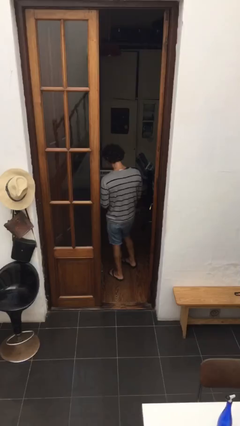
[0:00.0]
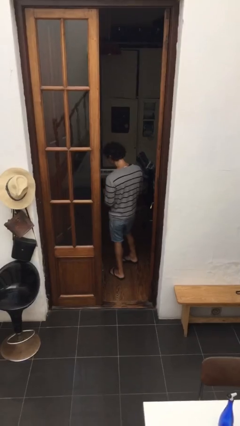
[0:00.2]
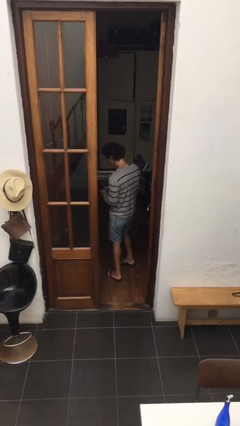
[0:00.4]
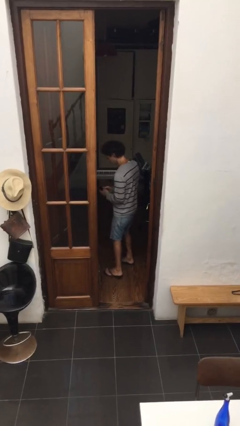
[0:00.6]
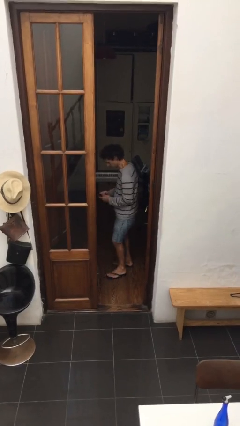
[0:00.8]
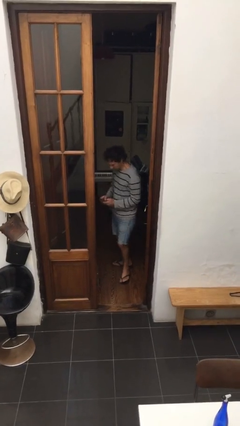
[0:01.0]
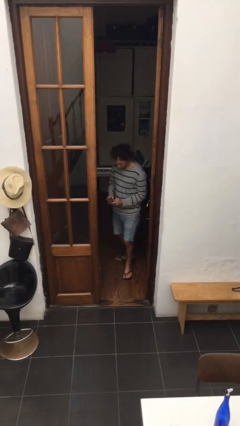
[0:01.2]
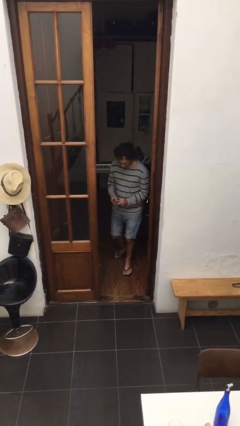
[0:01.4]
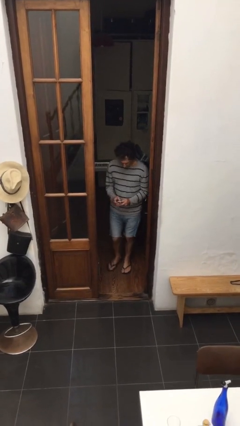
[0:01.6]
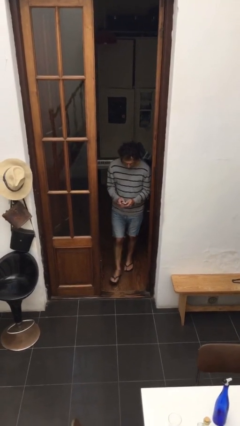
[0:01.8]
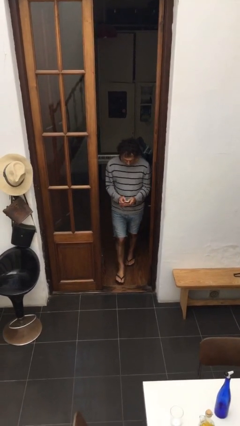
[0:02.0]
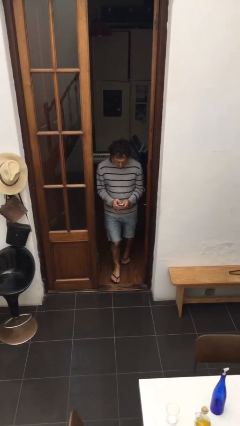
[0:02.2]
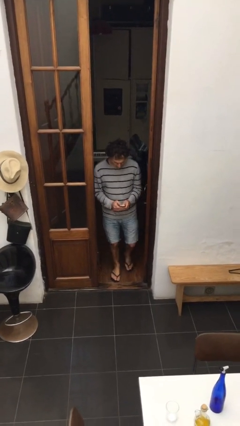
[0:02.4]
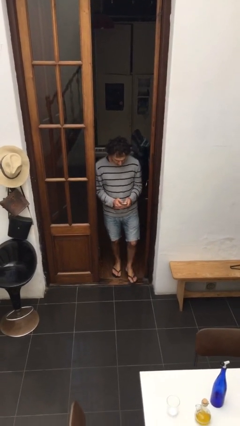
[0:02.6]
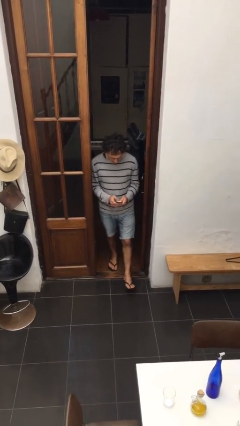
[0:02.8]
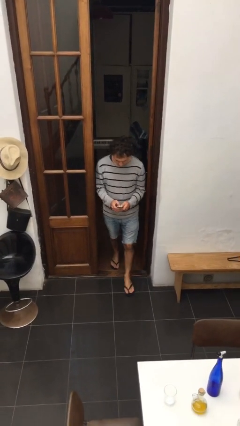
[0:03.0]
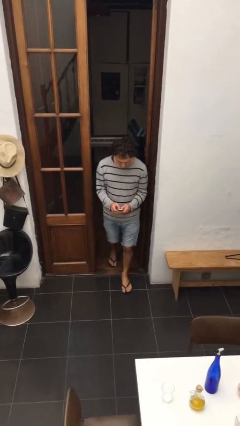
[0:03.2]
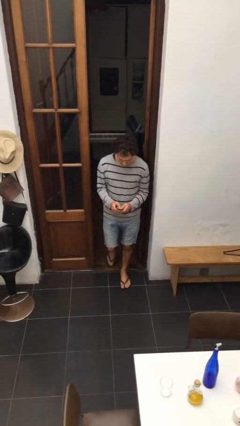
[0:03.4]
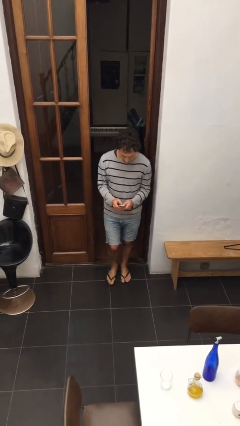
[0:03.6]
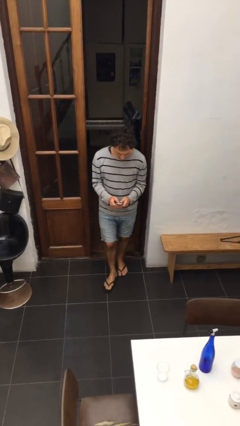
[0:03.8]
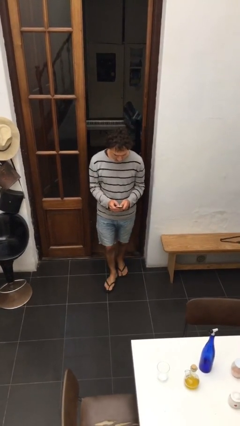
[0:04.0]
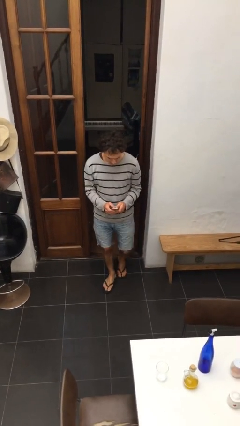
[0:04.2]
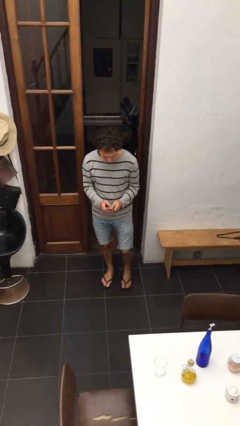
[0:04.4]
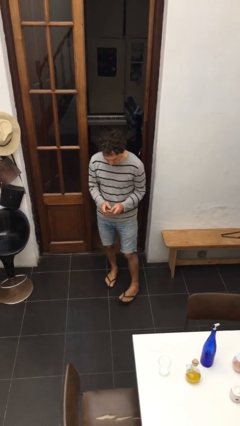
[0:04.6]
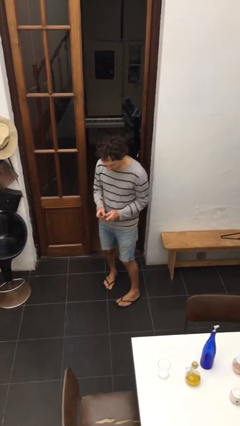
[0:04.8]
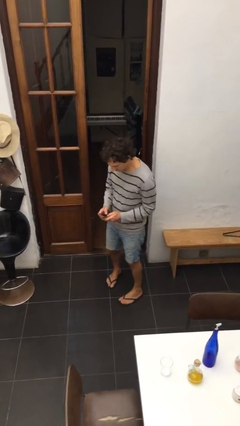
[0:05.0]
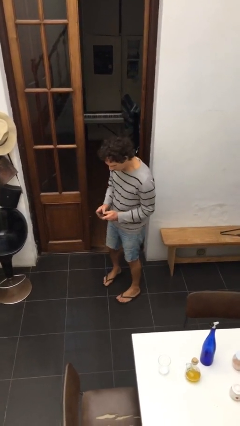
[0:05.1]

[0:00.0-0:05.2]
person enters scene through structure

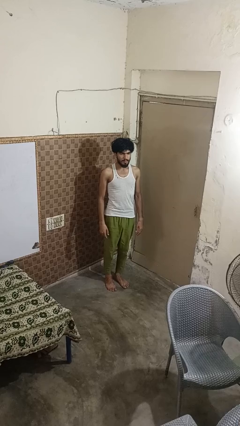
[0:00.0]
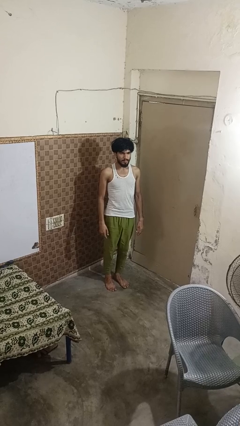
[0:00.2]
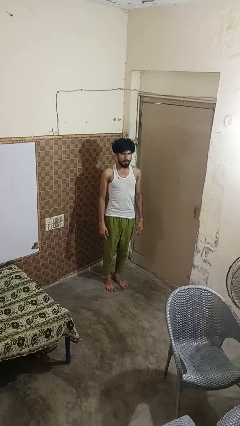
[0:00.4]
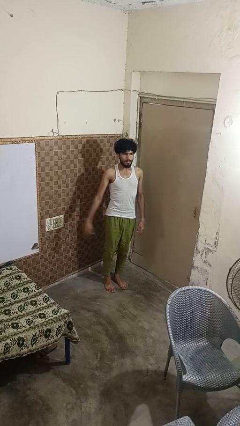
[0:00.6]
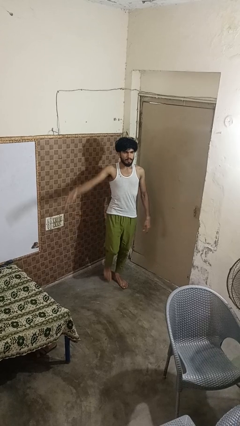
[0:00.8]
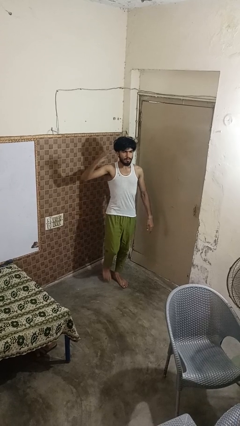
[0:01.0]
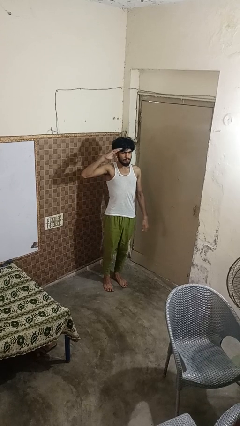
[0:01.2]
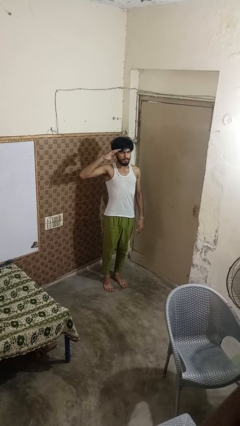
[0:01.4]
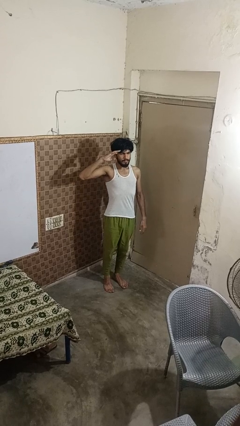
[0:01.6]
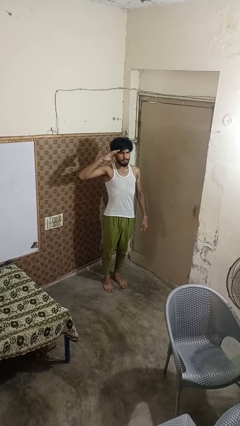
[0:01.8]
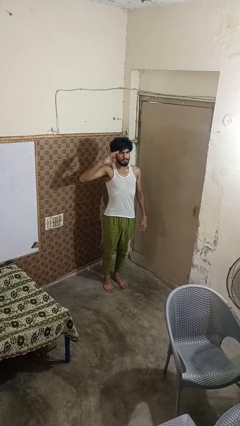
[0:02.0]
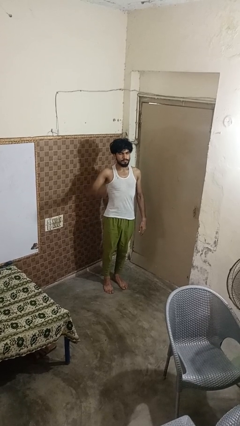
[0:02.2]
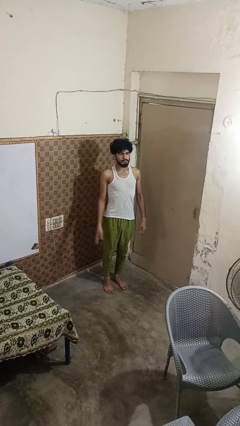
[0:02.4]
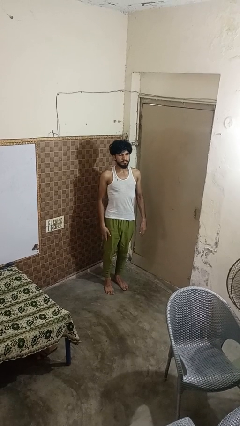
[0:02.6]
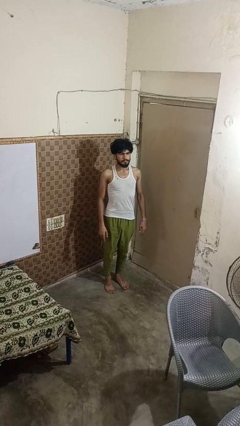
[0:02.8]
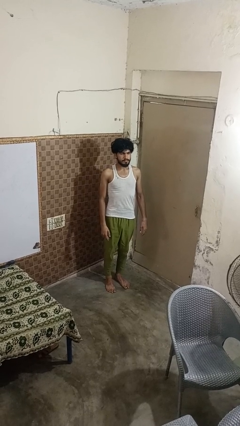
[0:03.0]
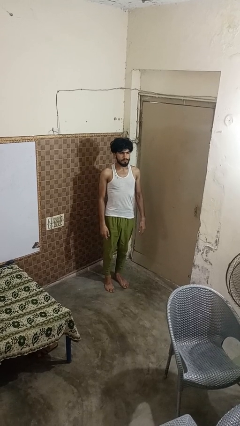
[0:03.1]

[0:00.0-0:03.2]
person salutes

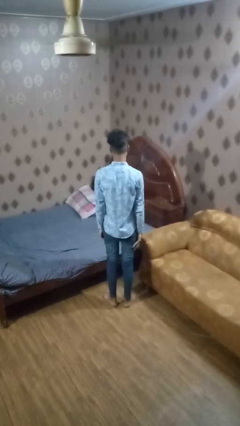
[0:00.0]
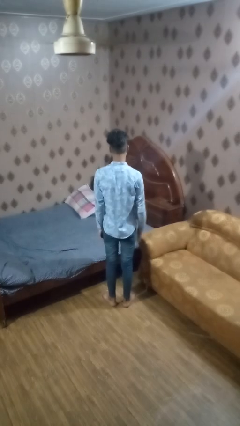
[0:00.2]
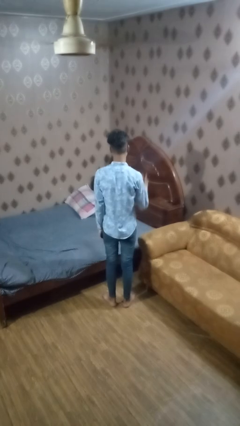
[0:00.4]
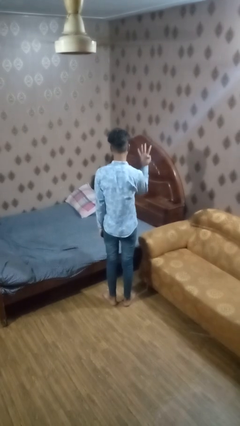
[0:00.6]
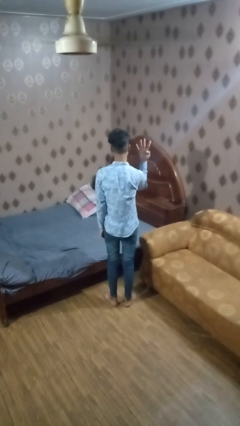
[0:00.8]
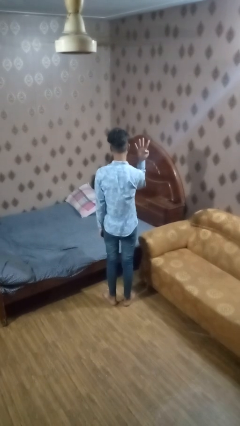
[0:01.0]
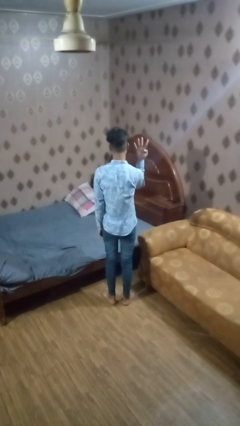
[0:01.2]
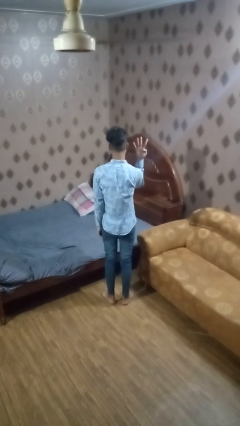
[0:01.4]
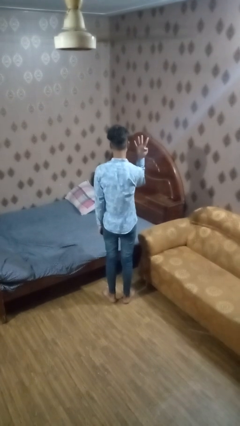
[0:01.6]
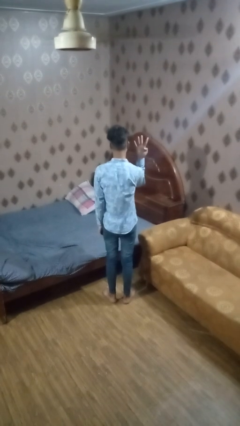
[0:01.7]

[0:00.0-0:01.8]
person gestures number four

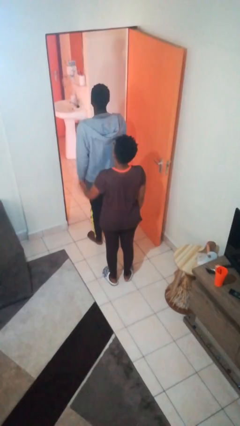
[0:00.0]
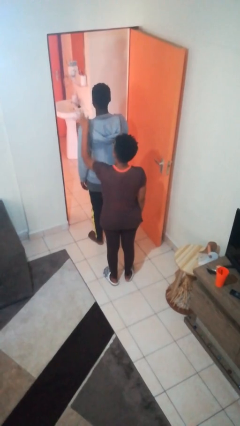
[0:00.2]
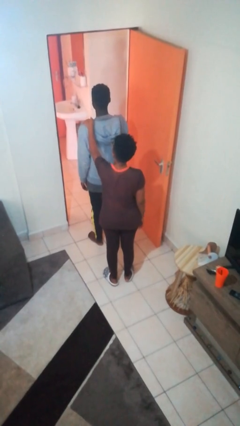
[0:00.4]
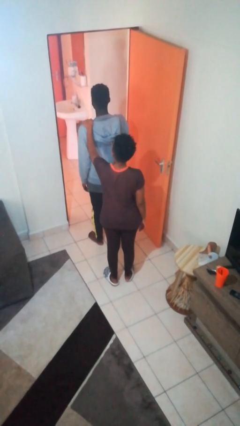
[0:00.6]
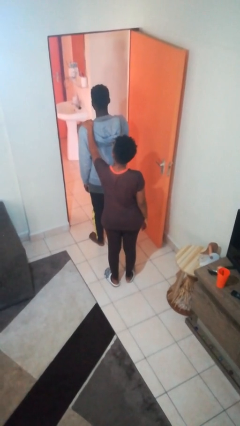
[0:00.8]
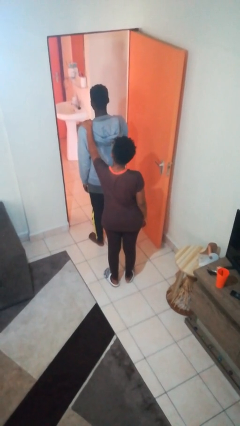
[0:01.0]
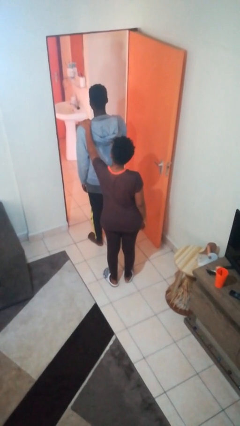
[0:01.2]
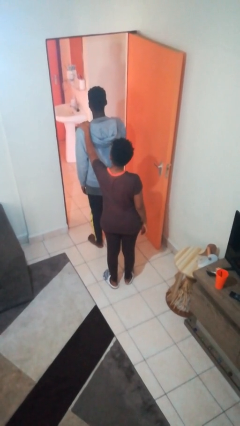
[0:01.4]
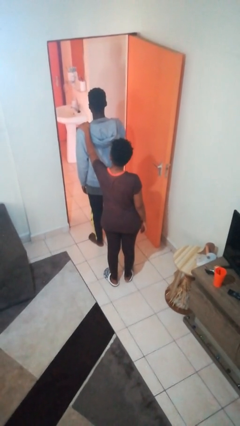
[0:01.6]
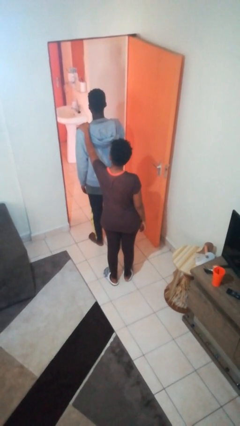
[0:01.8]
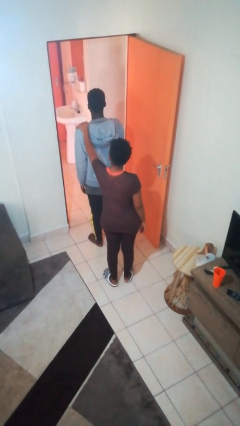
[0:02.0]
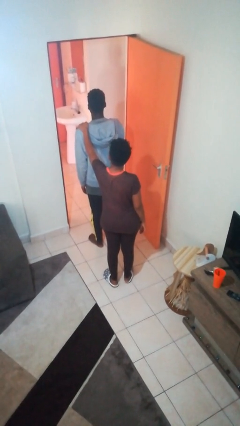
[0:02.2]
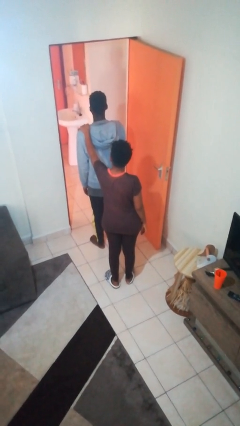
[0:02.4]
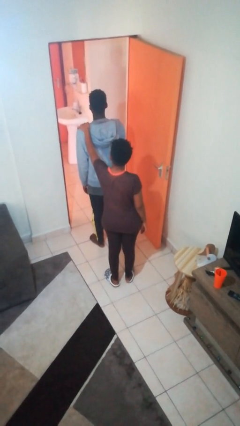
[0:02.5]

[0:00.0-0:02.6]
person grabs person by shoulder

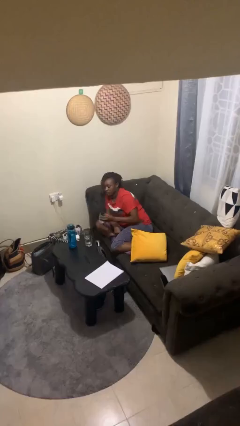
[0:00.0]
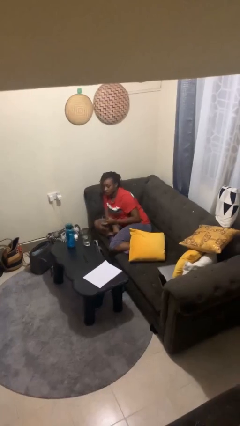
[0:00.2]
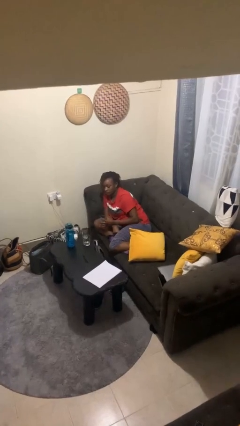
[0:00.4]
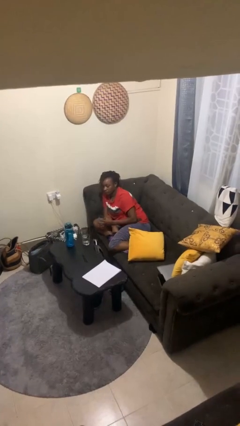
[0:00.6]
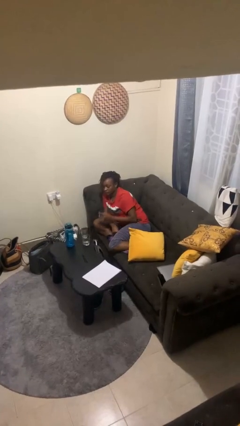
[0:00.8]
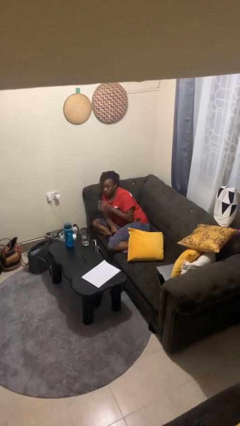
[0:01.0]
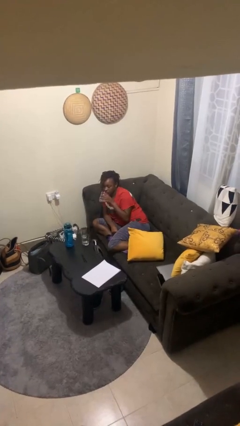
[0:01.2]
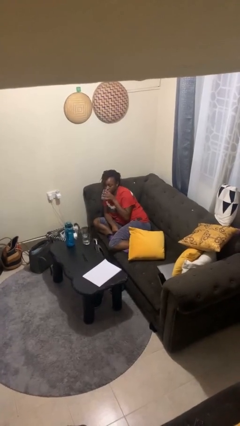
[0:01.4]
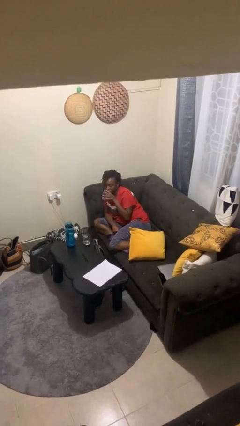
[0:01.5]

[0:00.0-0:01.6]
person drinks from shotglass

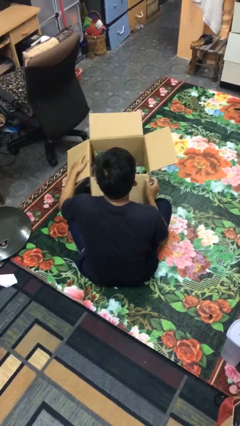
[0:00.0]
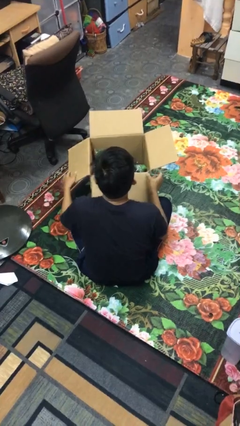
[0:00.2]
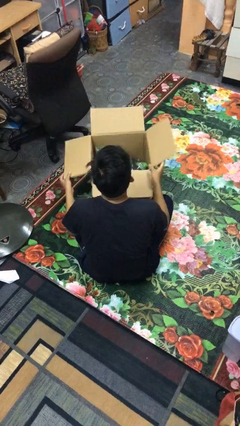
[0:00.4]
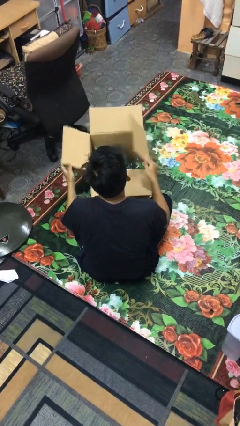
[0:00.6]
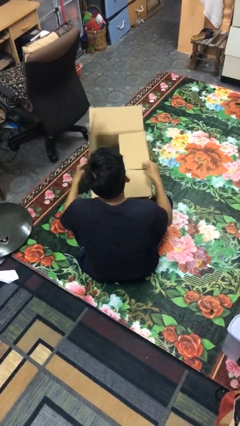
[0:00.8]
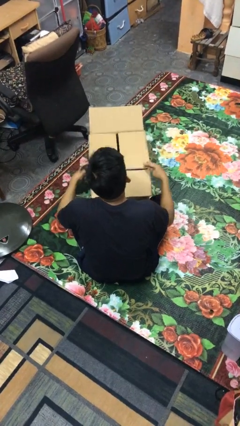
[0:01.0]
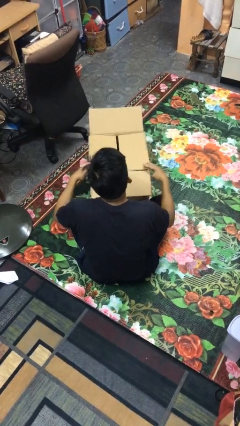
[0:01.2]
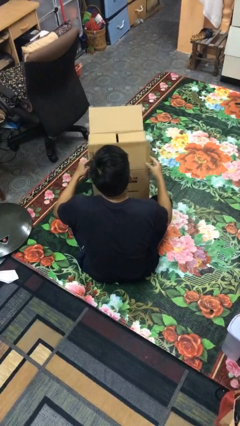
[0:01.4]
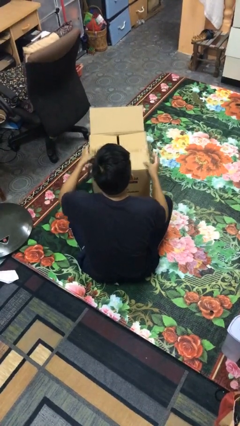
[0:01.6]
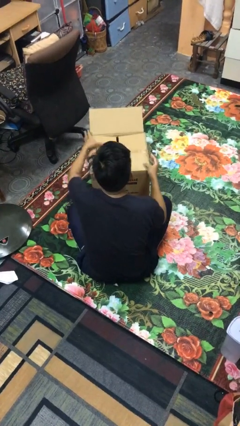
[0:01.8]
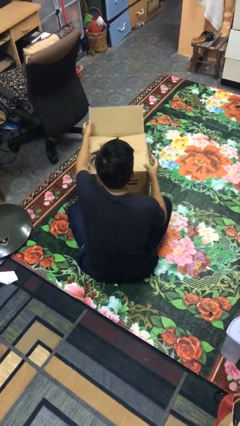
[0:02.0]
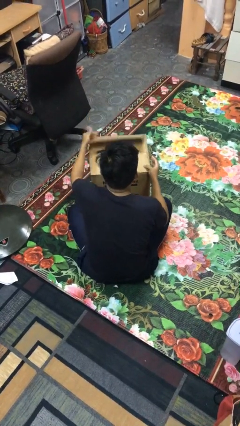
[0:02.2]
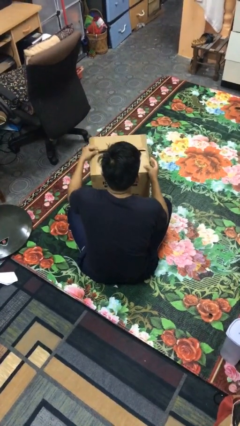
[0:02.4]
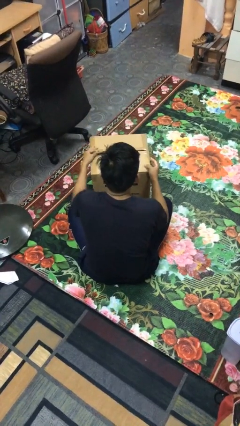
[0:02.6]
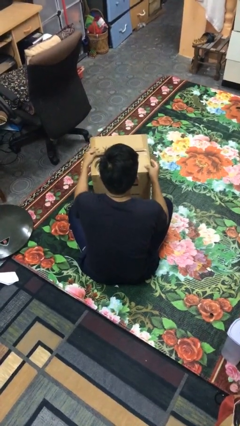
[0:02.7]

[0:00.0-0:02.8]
person closes box
